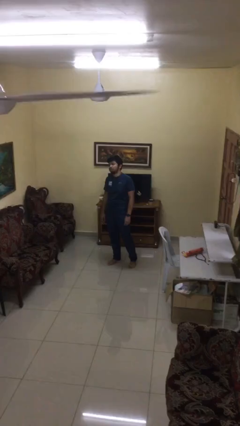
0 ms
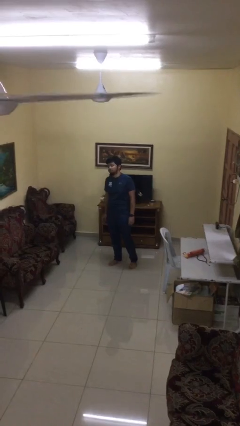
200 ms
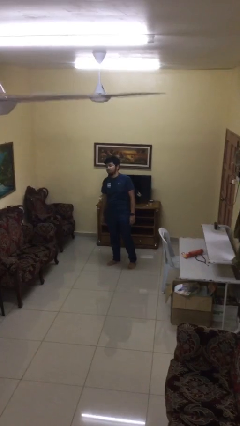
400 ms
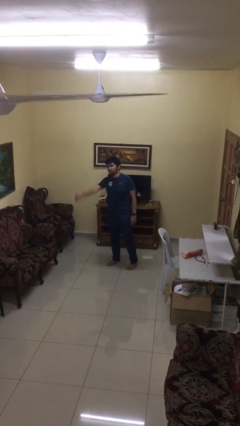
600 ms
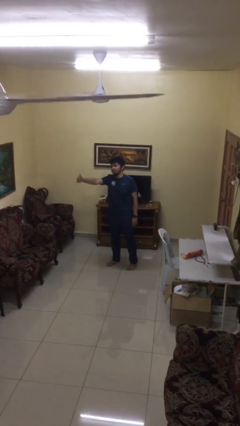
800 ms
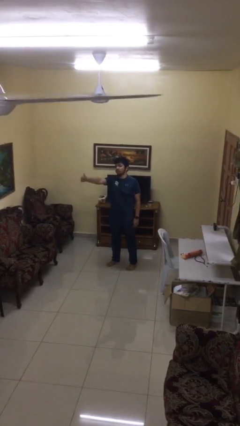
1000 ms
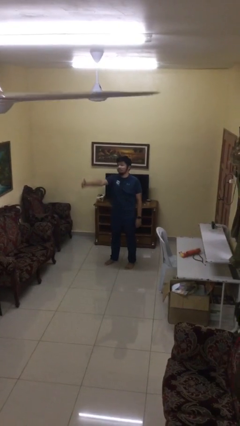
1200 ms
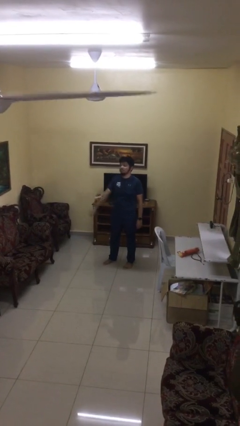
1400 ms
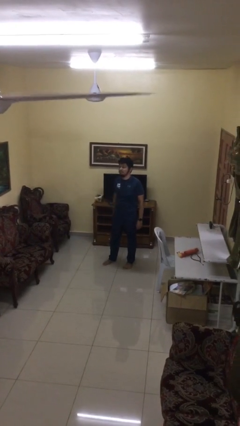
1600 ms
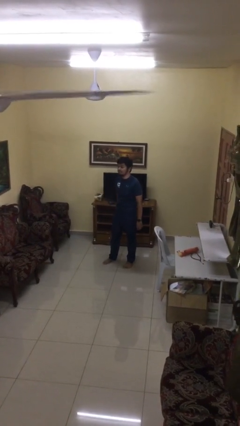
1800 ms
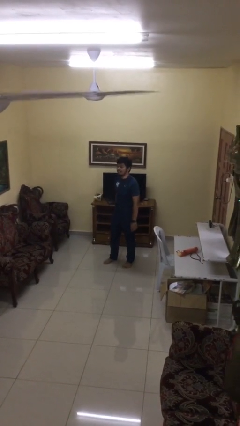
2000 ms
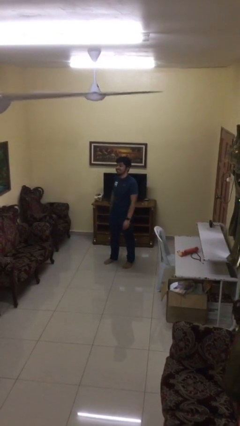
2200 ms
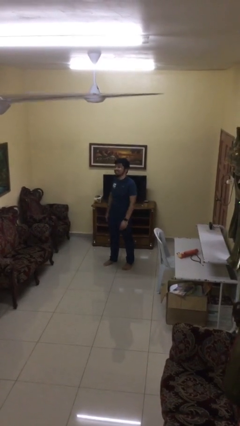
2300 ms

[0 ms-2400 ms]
person gestures thumbs up

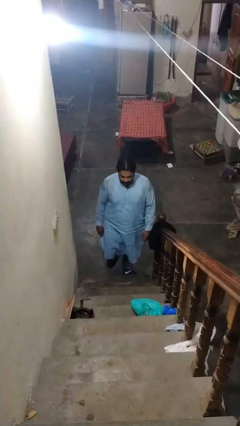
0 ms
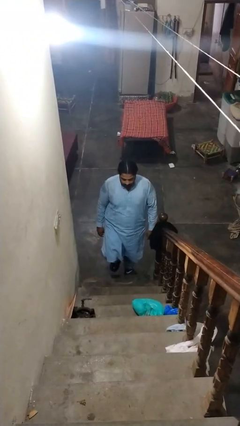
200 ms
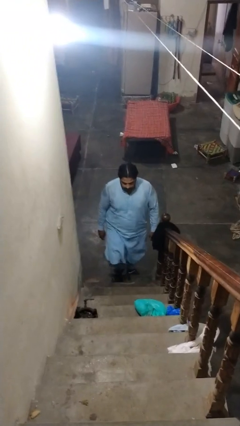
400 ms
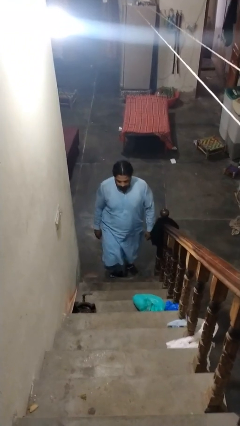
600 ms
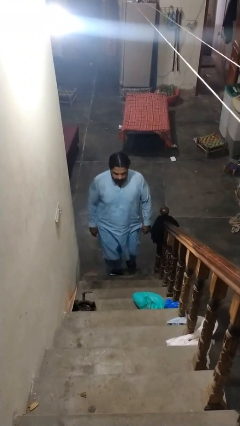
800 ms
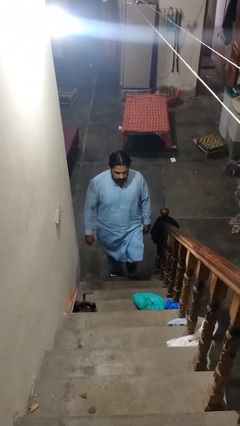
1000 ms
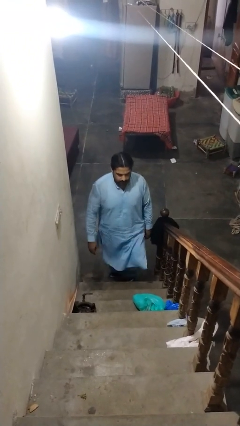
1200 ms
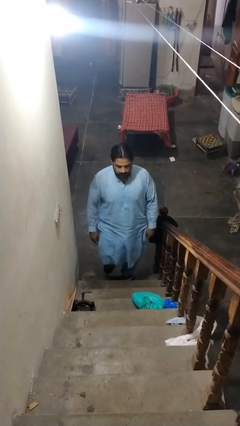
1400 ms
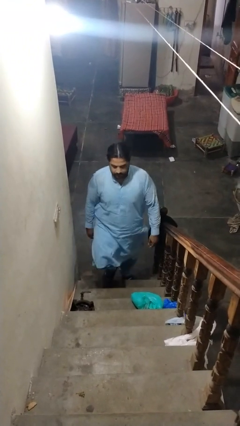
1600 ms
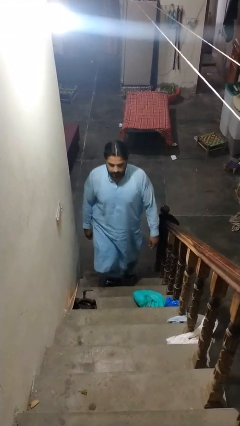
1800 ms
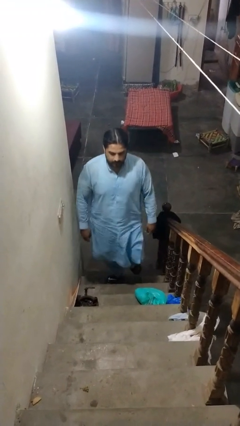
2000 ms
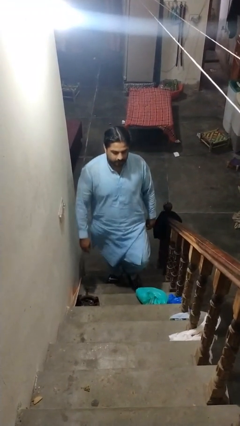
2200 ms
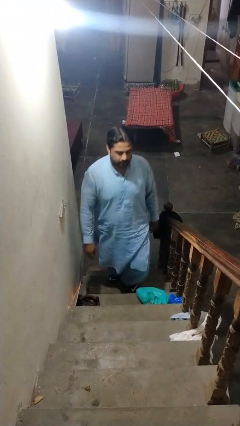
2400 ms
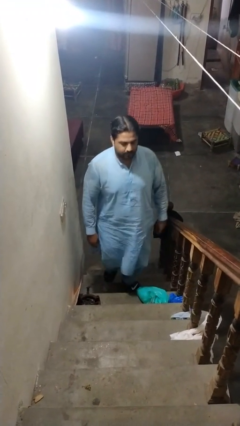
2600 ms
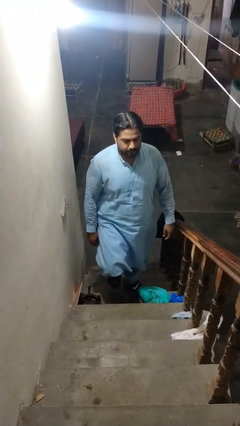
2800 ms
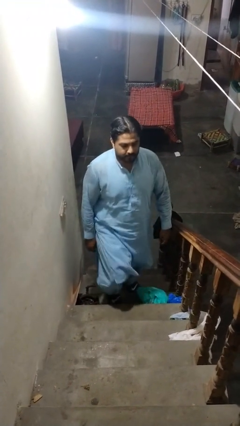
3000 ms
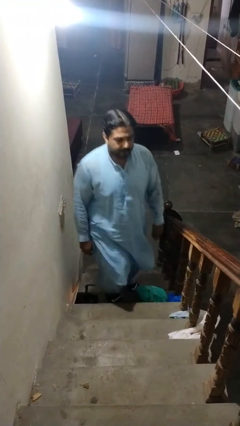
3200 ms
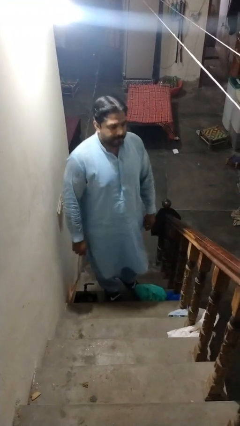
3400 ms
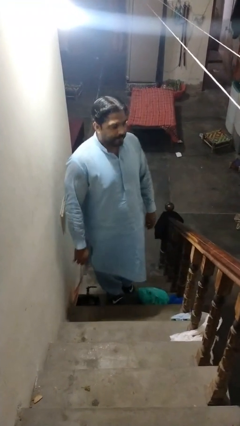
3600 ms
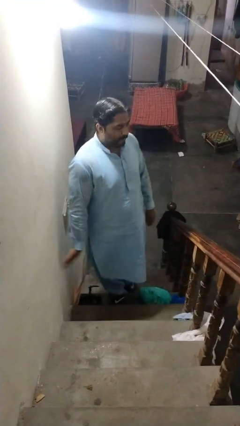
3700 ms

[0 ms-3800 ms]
person climbs up stairs

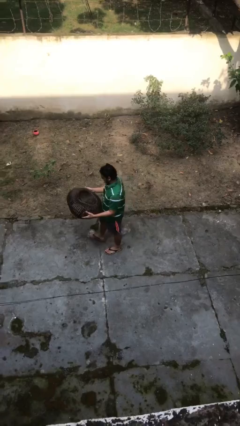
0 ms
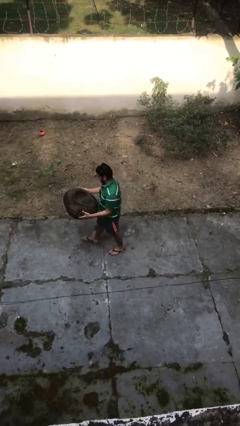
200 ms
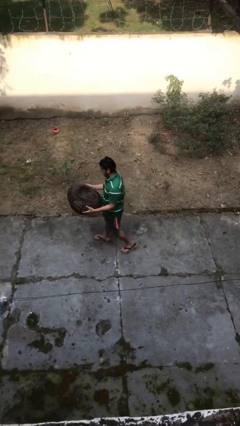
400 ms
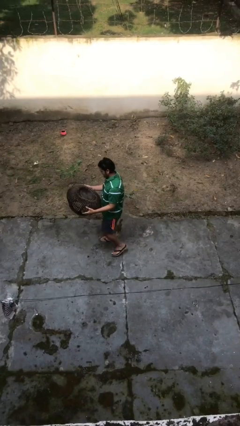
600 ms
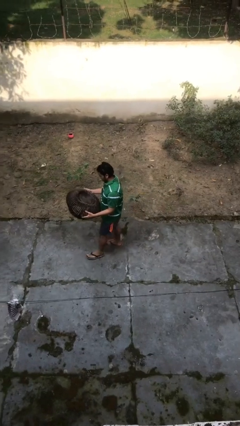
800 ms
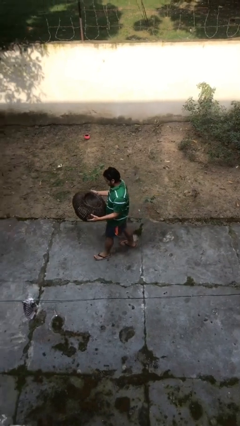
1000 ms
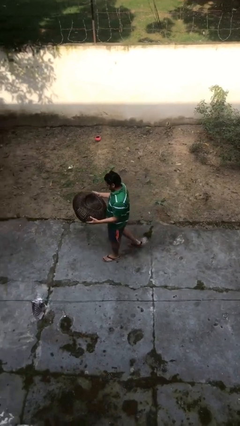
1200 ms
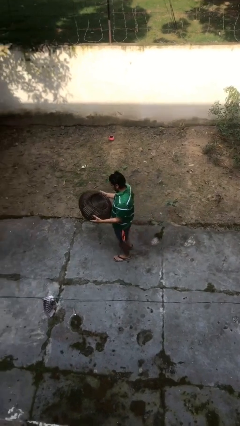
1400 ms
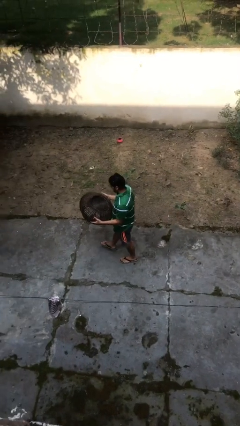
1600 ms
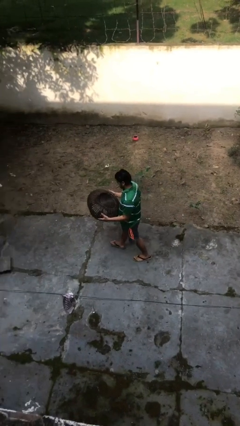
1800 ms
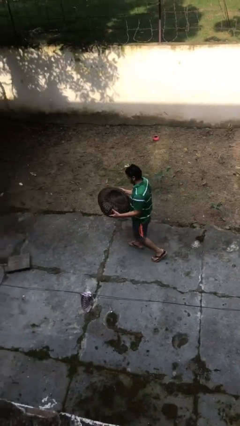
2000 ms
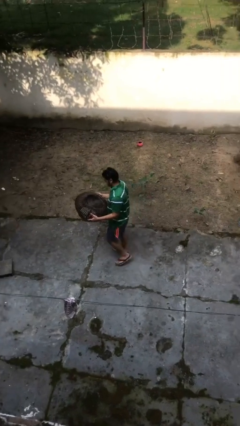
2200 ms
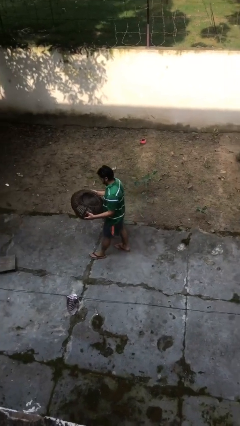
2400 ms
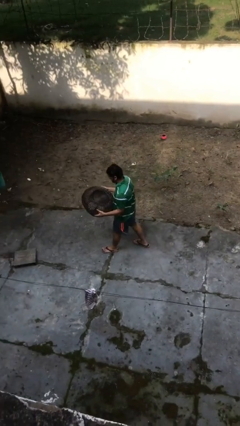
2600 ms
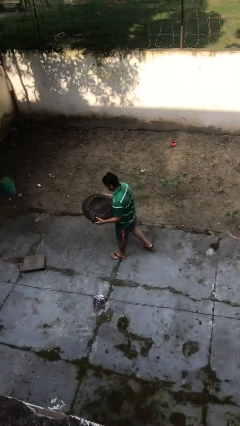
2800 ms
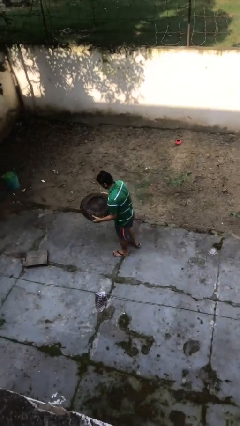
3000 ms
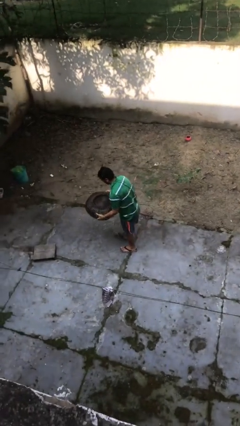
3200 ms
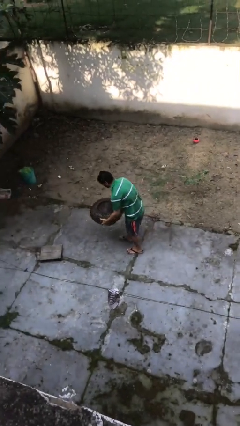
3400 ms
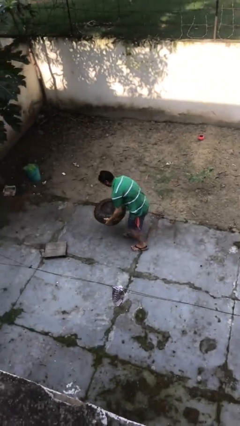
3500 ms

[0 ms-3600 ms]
person carries heavy object

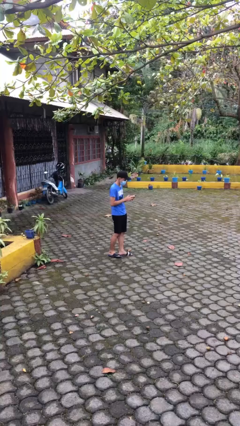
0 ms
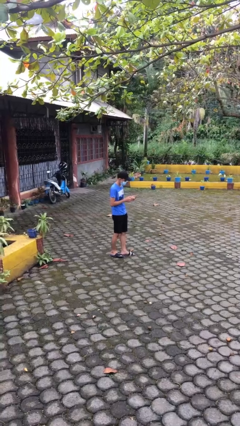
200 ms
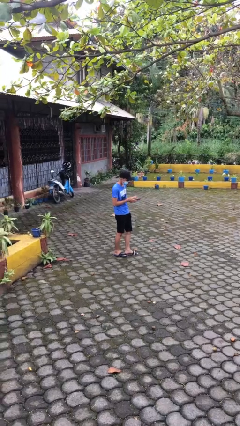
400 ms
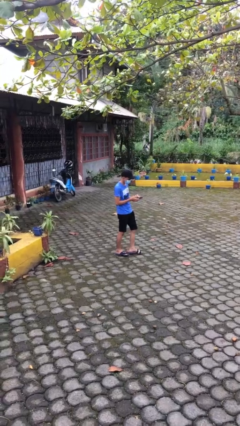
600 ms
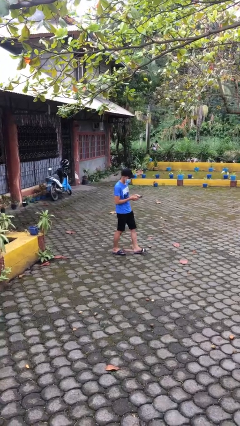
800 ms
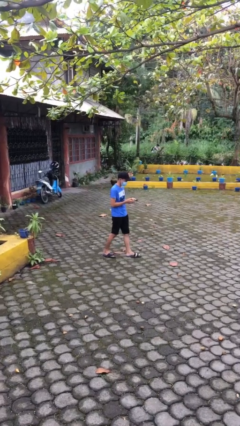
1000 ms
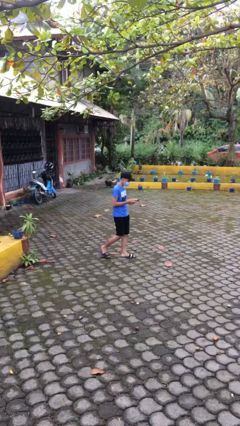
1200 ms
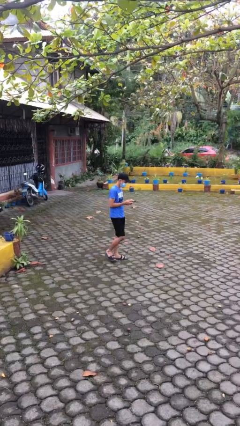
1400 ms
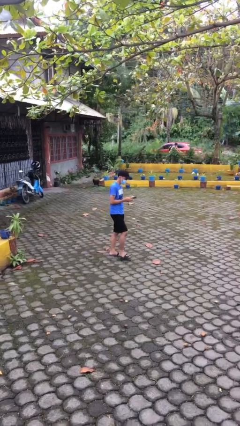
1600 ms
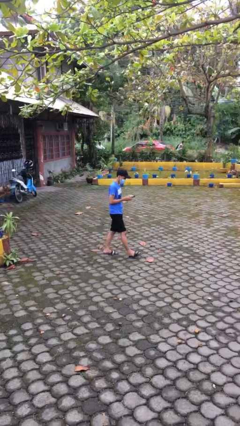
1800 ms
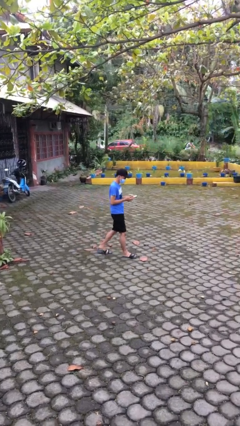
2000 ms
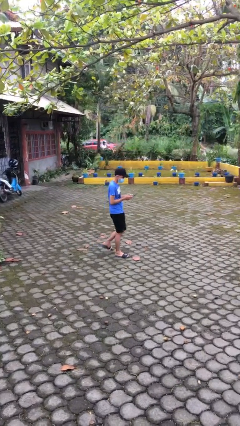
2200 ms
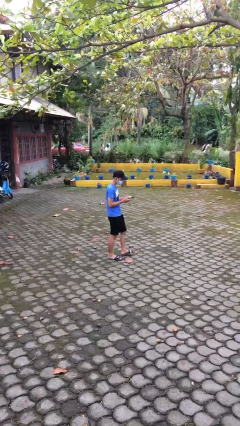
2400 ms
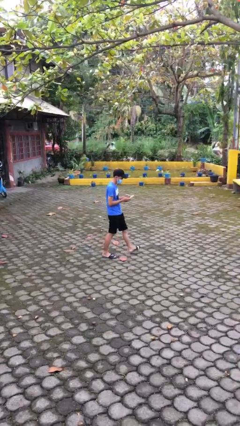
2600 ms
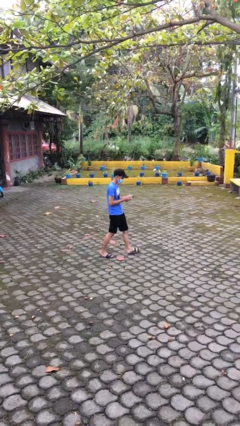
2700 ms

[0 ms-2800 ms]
person texts on phone

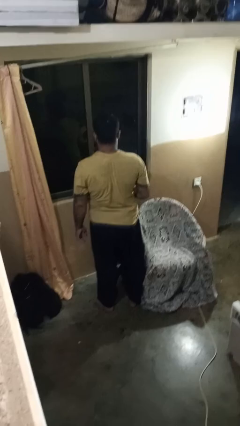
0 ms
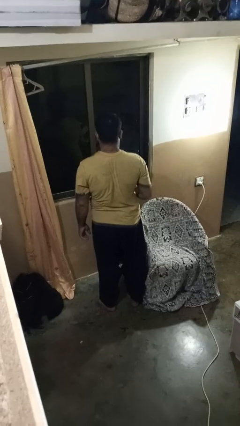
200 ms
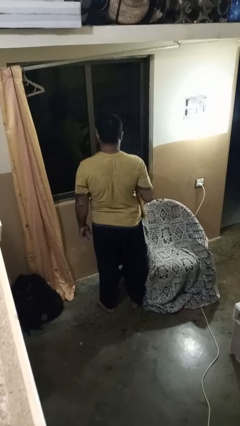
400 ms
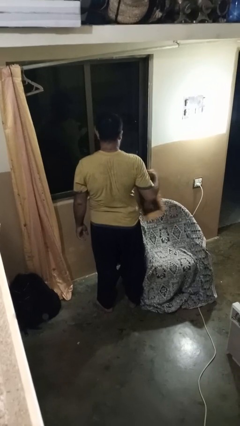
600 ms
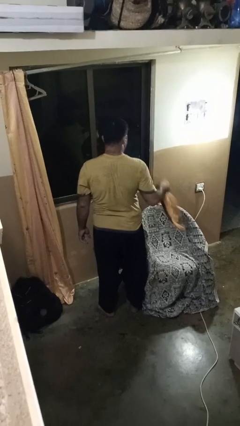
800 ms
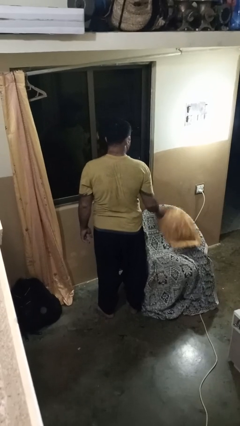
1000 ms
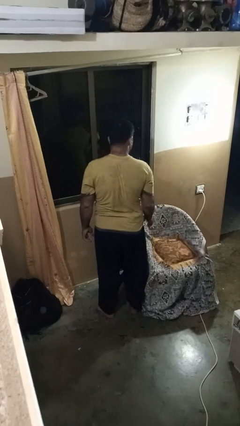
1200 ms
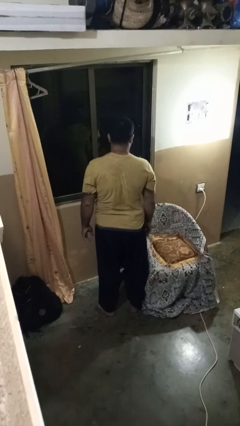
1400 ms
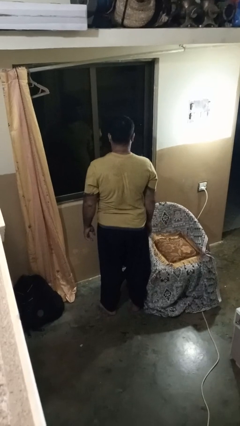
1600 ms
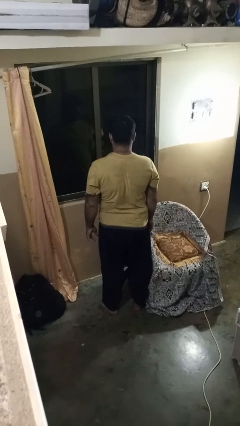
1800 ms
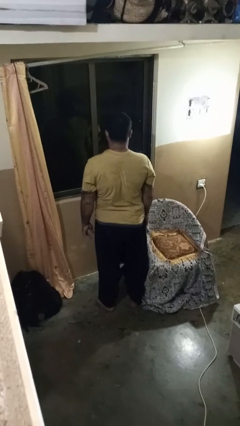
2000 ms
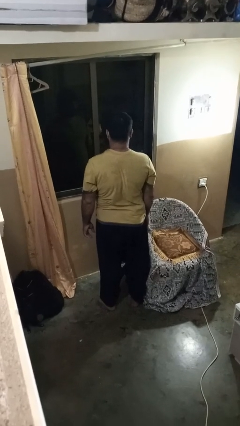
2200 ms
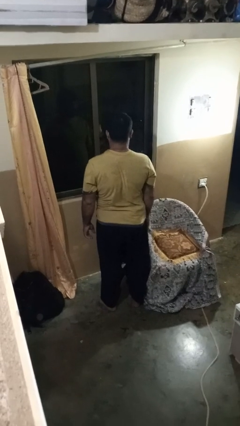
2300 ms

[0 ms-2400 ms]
person puts down object on couch

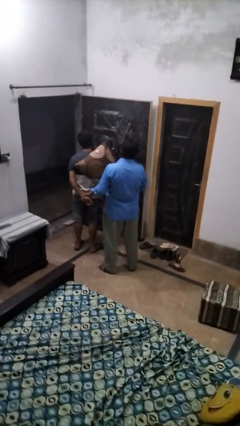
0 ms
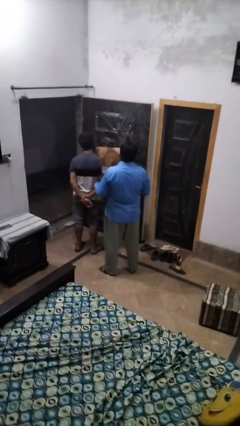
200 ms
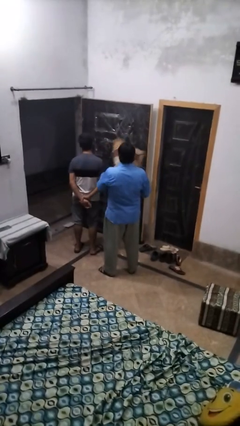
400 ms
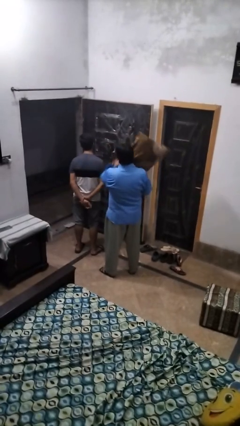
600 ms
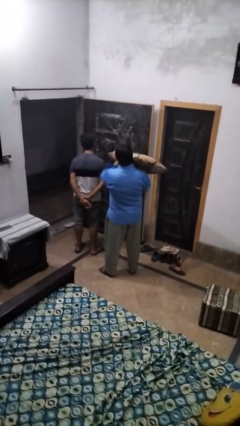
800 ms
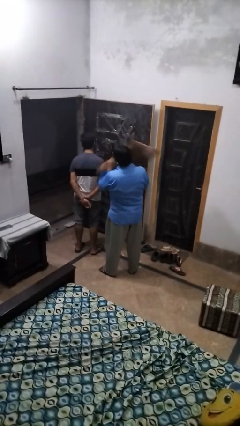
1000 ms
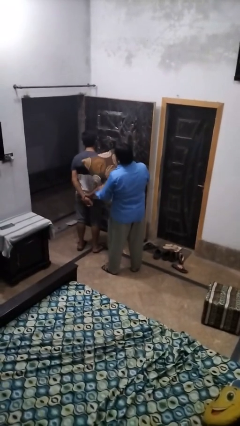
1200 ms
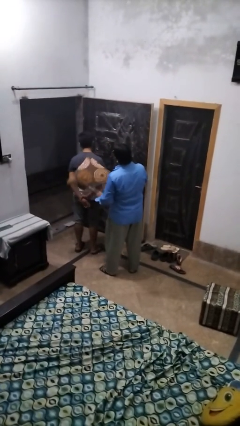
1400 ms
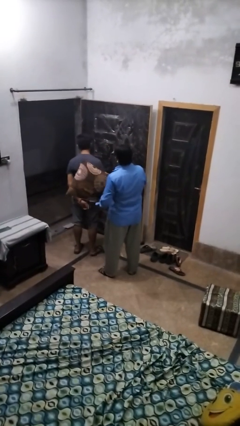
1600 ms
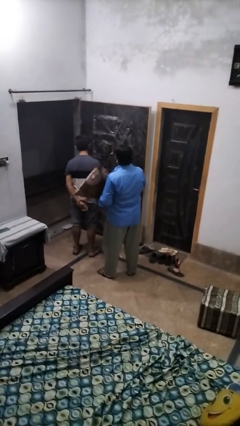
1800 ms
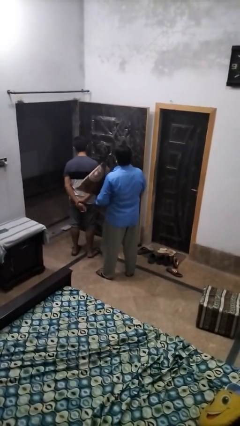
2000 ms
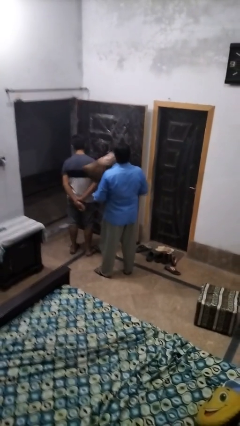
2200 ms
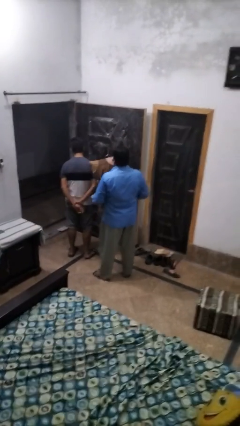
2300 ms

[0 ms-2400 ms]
person hits person with pillow
